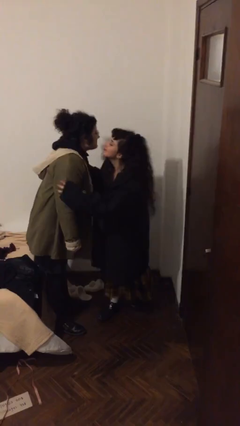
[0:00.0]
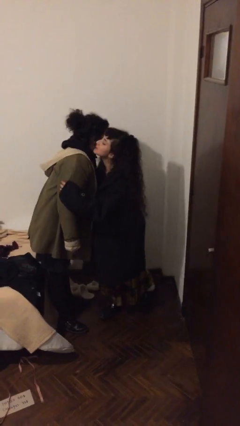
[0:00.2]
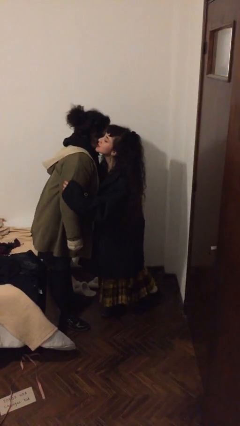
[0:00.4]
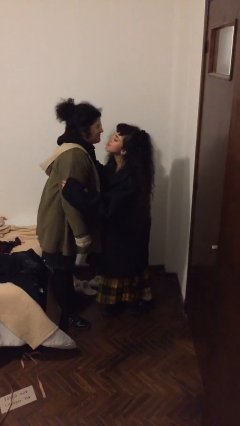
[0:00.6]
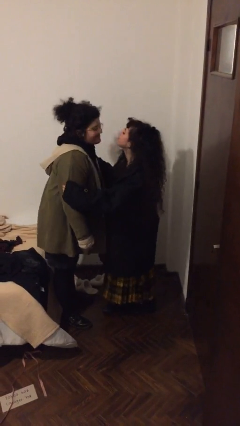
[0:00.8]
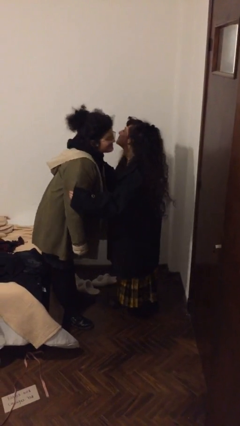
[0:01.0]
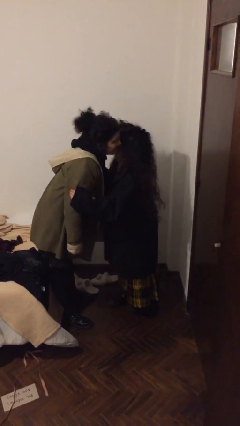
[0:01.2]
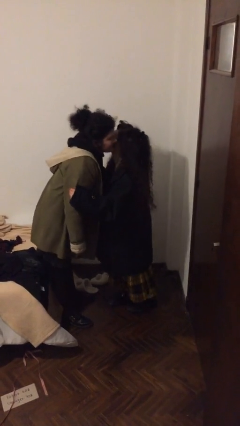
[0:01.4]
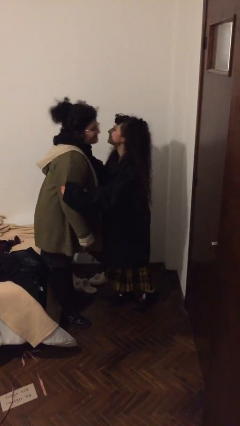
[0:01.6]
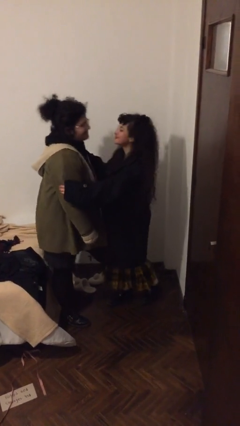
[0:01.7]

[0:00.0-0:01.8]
person kisses cheek of person

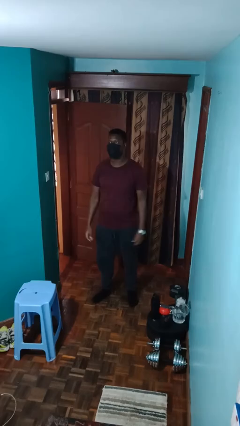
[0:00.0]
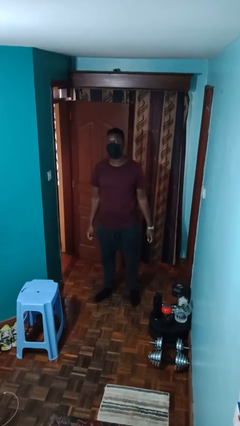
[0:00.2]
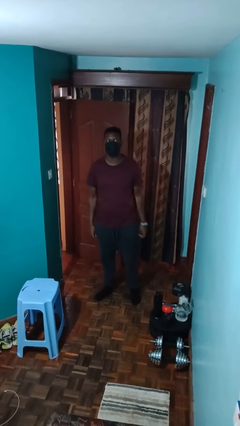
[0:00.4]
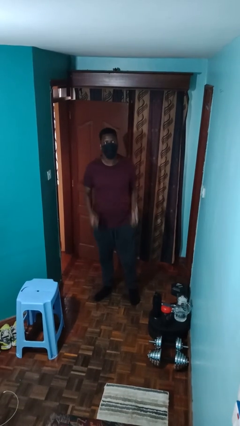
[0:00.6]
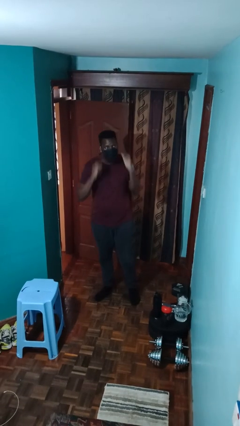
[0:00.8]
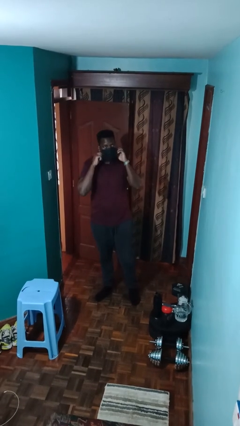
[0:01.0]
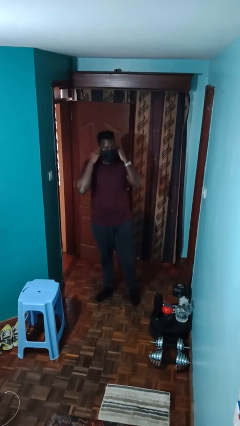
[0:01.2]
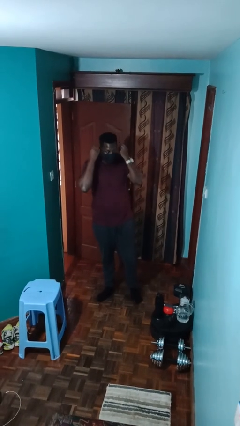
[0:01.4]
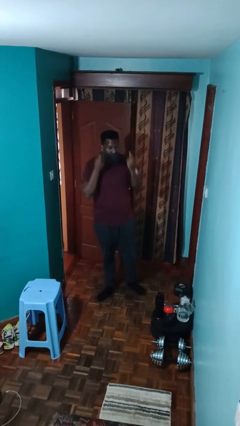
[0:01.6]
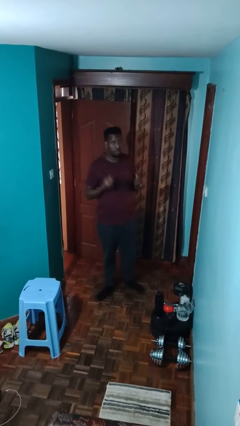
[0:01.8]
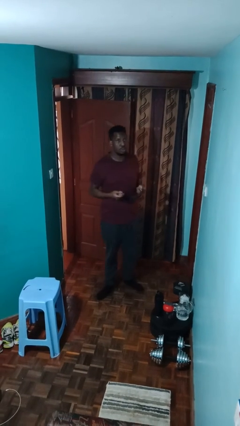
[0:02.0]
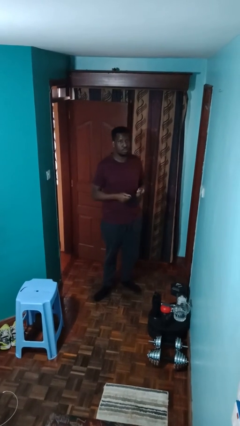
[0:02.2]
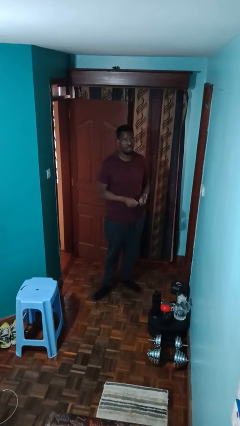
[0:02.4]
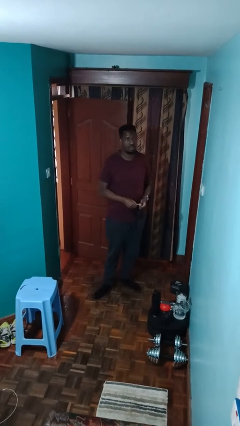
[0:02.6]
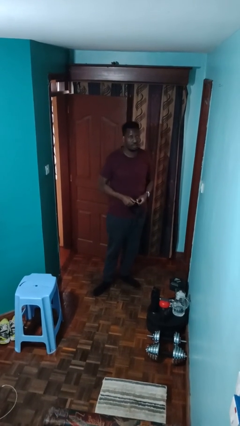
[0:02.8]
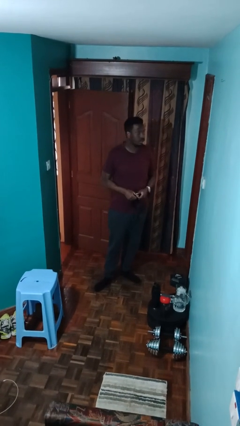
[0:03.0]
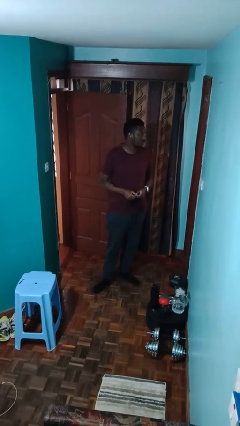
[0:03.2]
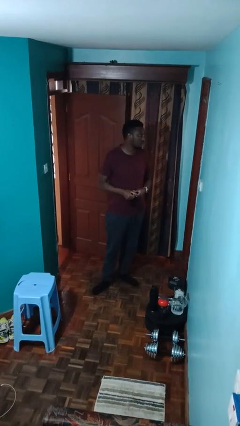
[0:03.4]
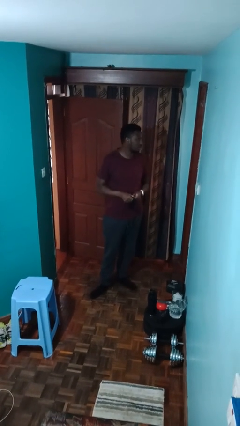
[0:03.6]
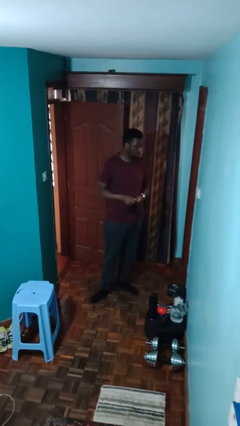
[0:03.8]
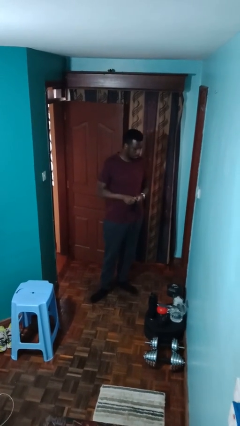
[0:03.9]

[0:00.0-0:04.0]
person takes off facemask

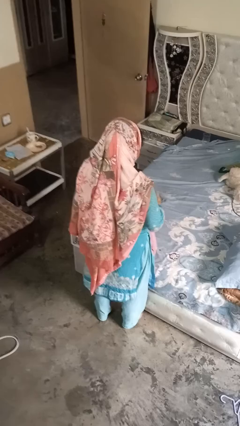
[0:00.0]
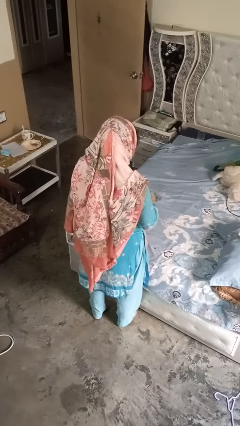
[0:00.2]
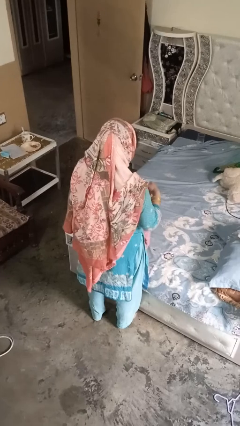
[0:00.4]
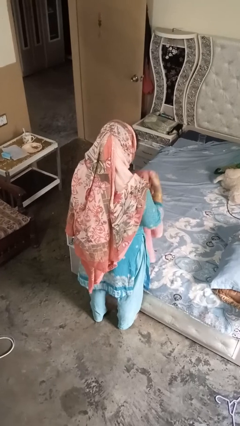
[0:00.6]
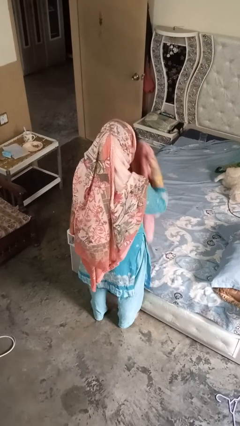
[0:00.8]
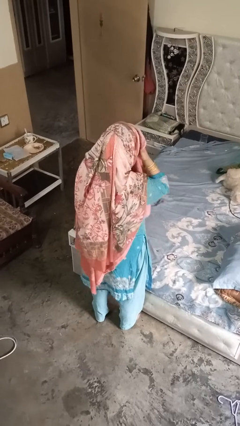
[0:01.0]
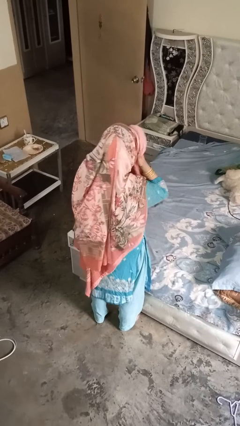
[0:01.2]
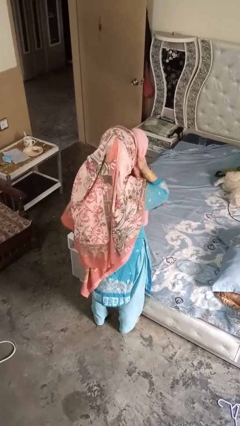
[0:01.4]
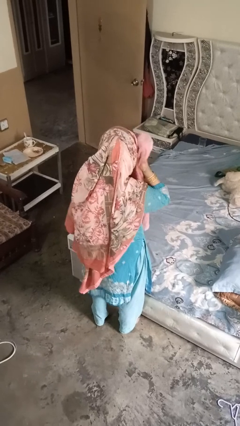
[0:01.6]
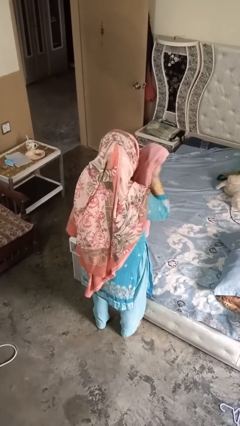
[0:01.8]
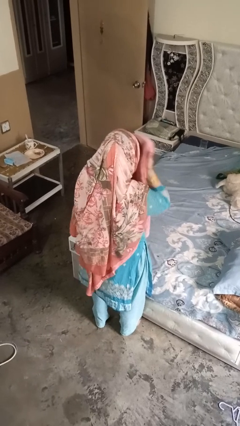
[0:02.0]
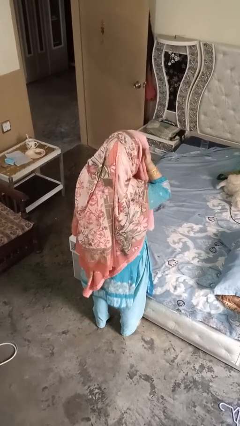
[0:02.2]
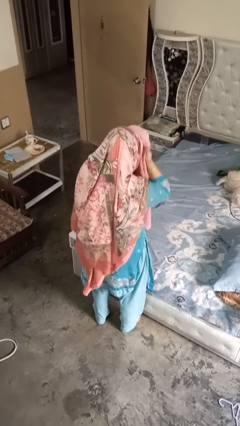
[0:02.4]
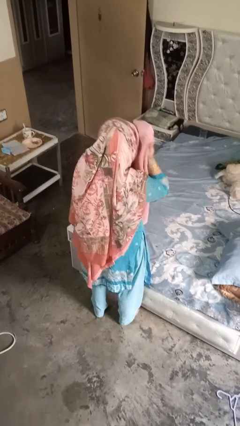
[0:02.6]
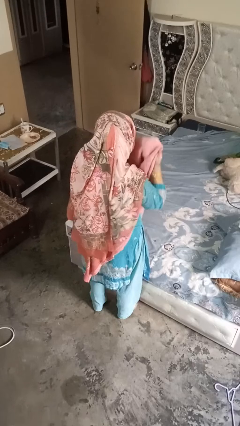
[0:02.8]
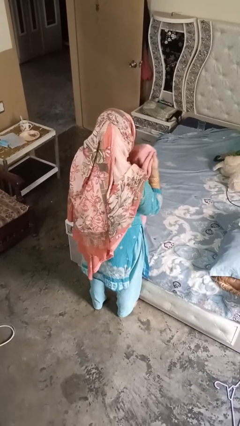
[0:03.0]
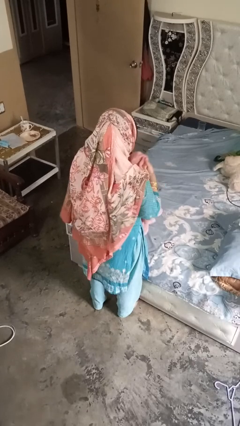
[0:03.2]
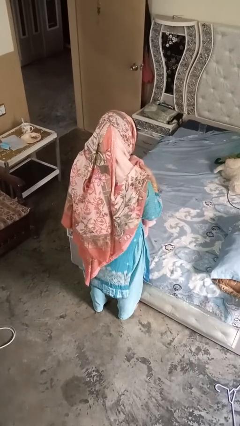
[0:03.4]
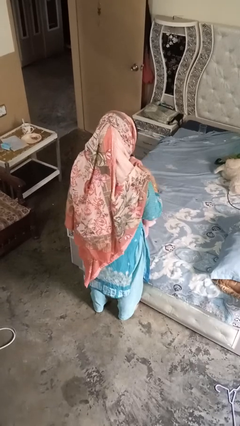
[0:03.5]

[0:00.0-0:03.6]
person dries hair with hairdryer

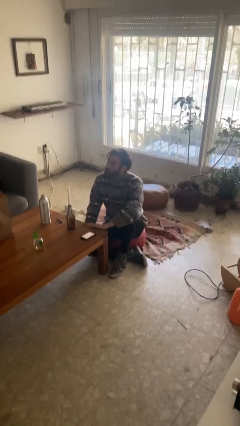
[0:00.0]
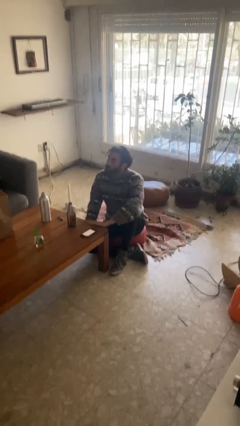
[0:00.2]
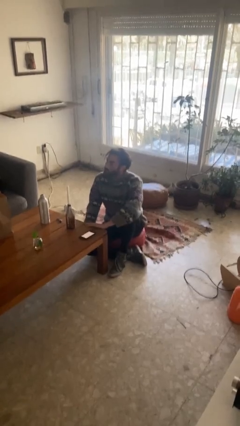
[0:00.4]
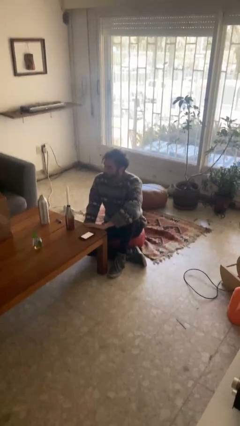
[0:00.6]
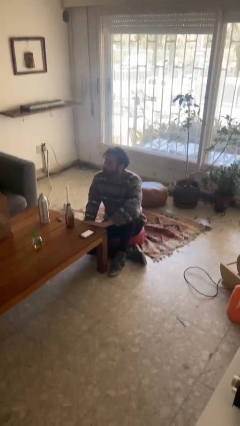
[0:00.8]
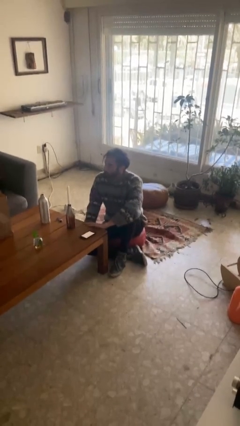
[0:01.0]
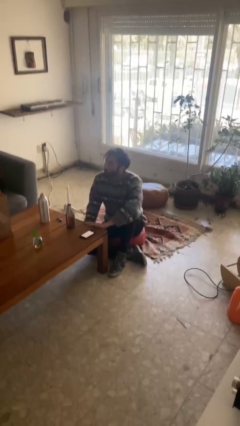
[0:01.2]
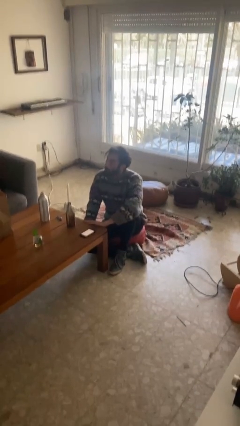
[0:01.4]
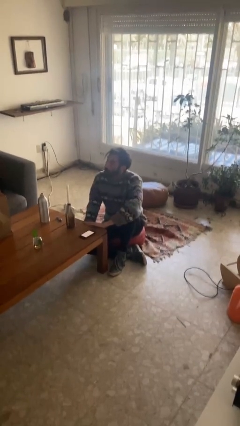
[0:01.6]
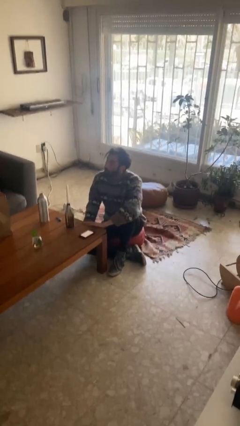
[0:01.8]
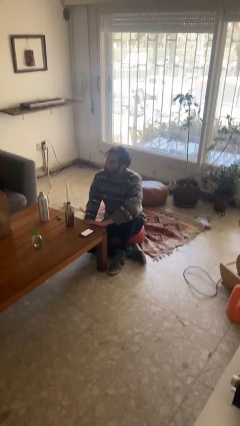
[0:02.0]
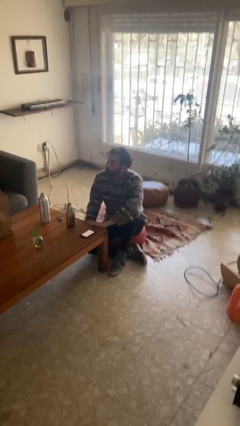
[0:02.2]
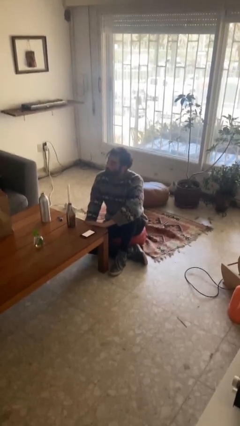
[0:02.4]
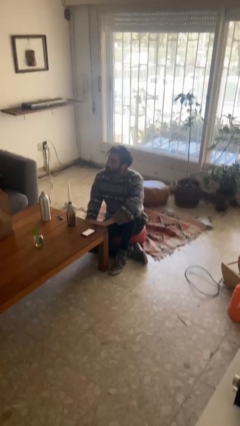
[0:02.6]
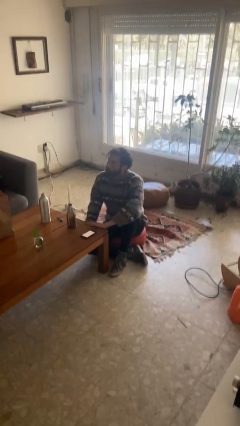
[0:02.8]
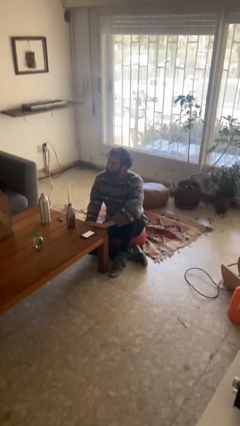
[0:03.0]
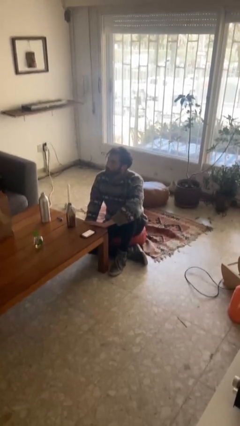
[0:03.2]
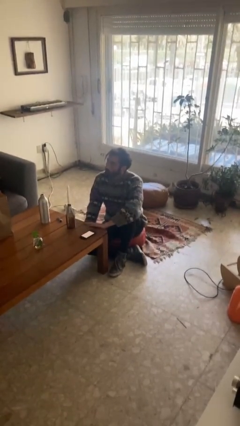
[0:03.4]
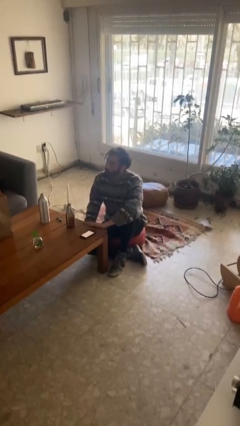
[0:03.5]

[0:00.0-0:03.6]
person nods head

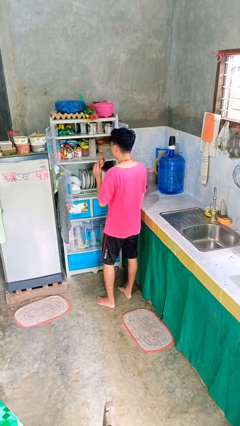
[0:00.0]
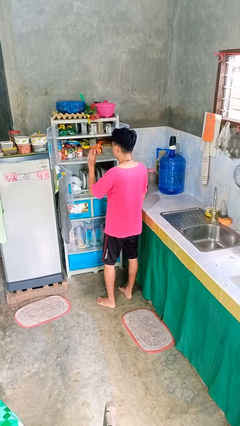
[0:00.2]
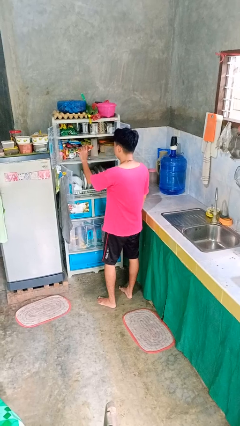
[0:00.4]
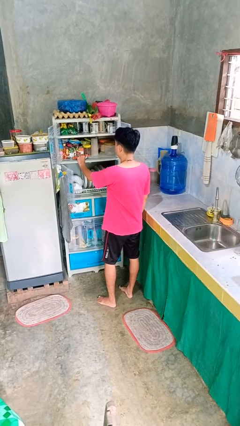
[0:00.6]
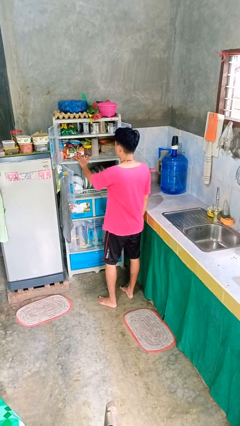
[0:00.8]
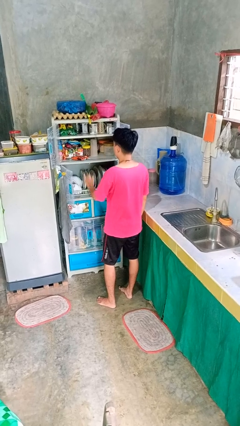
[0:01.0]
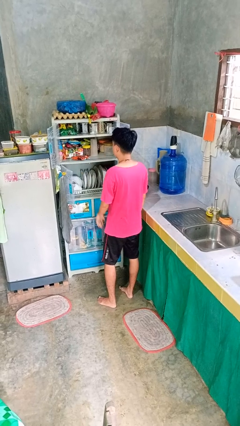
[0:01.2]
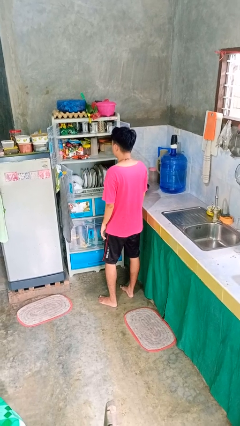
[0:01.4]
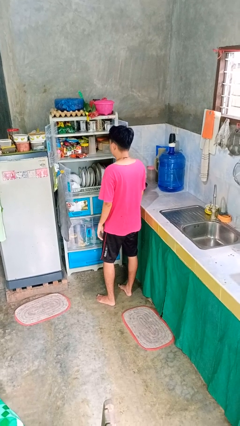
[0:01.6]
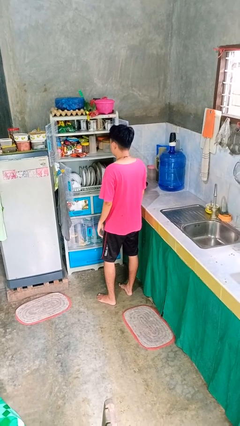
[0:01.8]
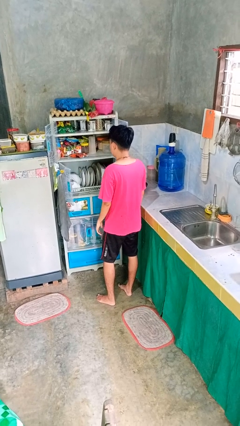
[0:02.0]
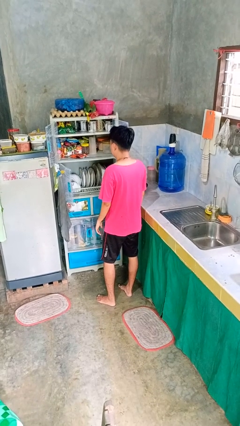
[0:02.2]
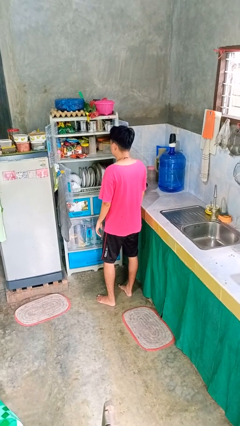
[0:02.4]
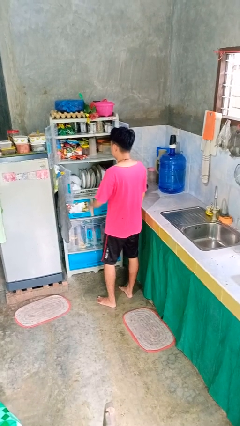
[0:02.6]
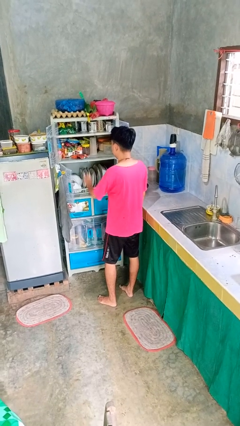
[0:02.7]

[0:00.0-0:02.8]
person puts object in cabinet

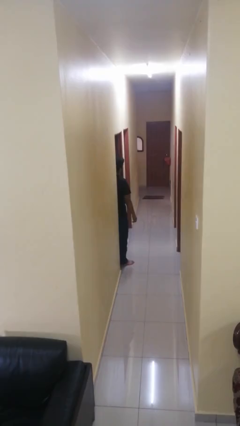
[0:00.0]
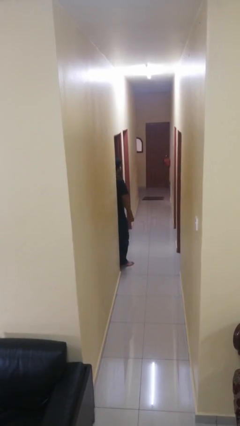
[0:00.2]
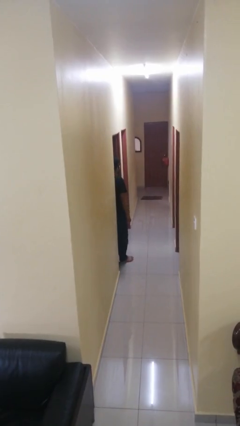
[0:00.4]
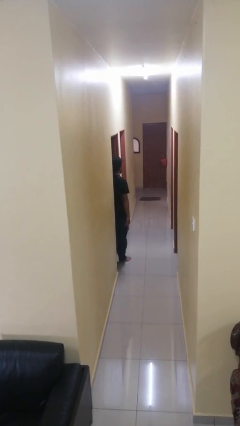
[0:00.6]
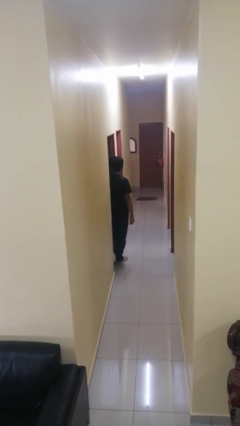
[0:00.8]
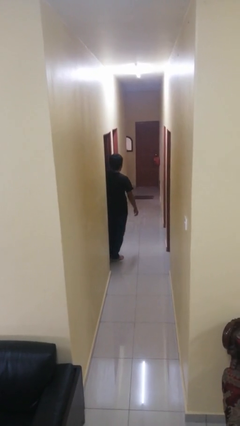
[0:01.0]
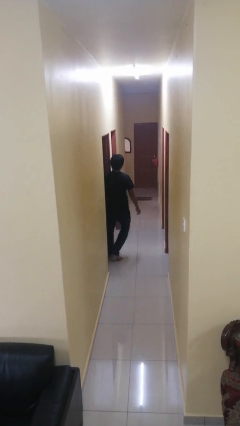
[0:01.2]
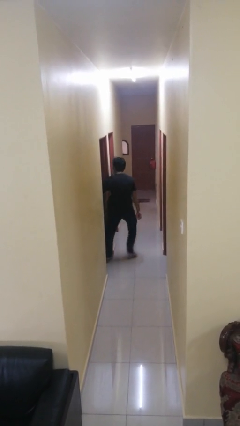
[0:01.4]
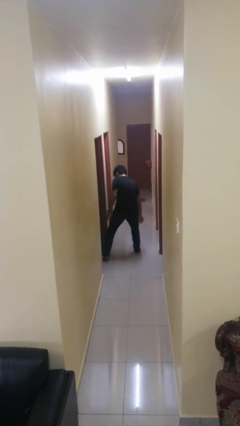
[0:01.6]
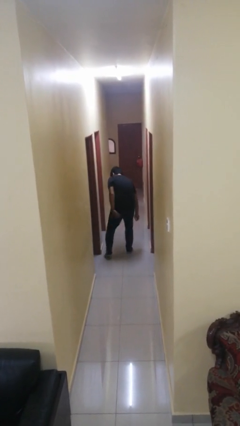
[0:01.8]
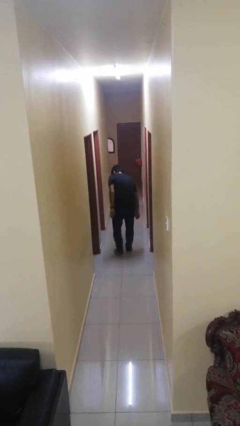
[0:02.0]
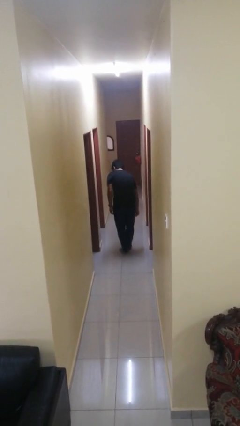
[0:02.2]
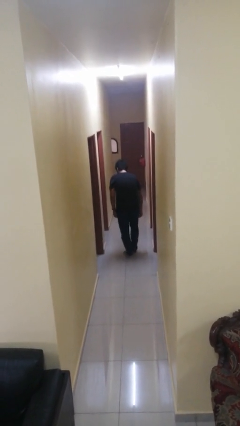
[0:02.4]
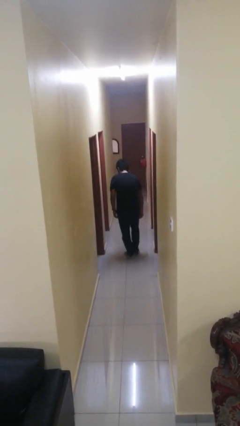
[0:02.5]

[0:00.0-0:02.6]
person bumps into wall
